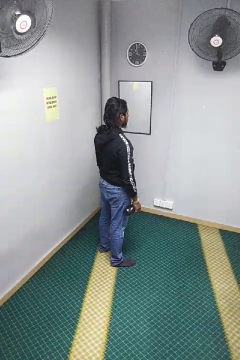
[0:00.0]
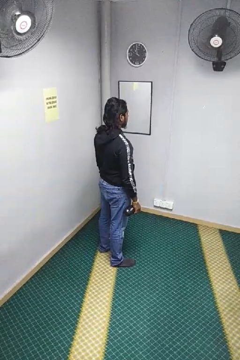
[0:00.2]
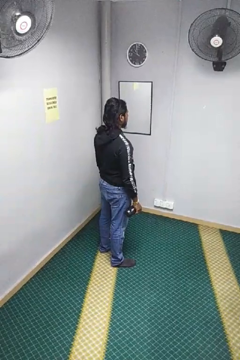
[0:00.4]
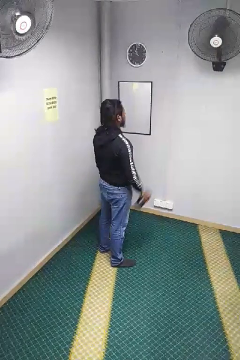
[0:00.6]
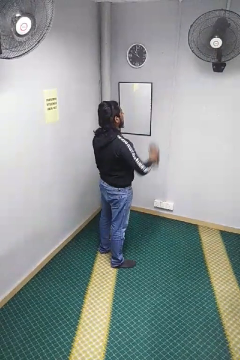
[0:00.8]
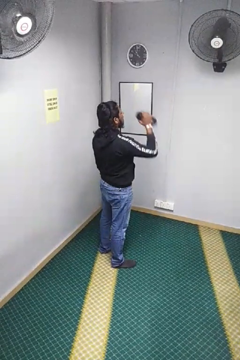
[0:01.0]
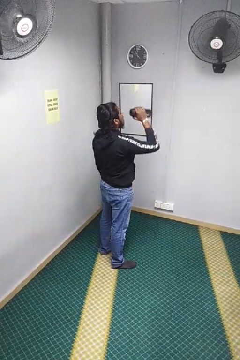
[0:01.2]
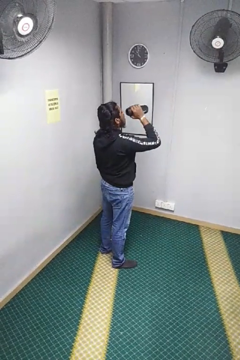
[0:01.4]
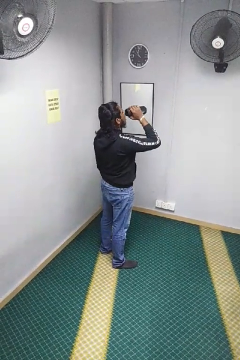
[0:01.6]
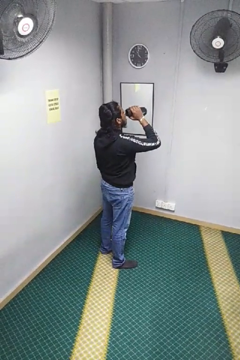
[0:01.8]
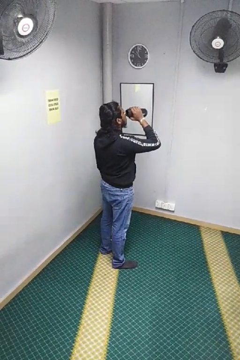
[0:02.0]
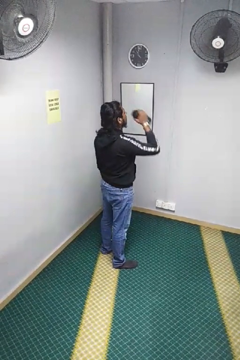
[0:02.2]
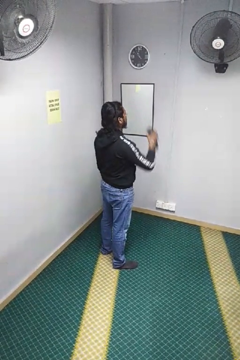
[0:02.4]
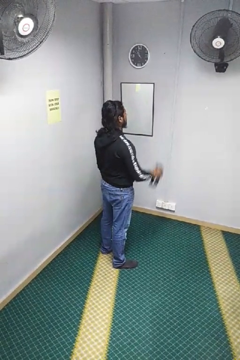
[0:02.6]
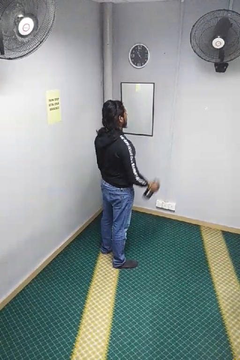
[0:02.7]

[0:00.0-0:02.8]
person drinks from bottle

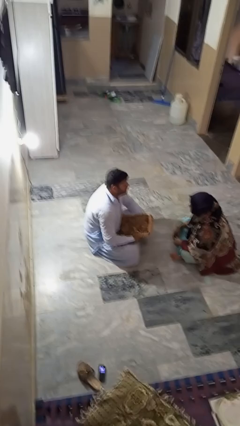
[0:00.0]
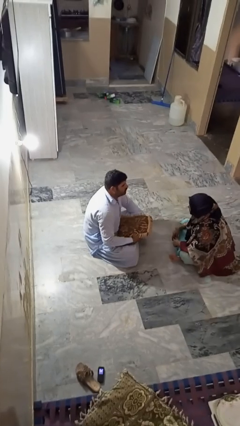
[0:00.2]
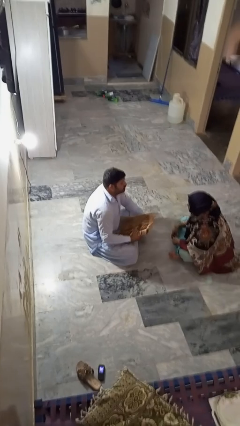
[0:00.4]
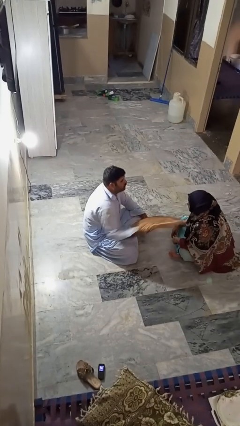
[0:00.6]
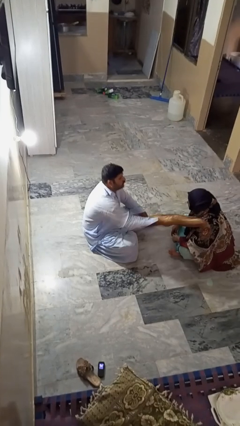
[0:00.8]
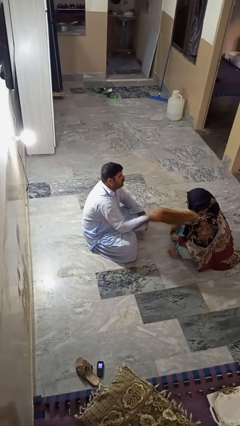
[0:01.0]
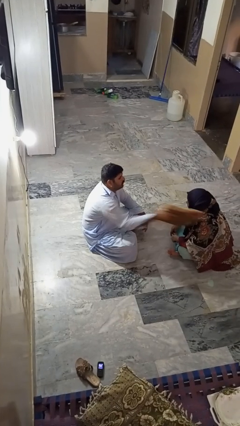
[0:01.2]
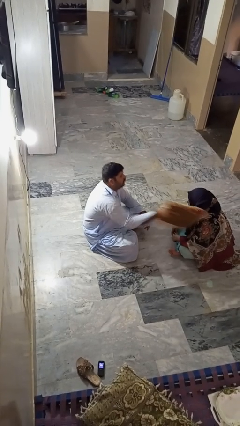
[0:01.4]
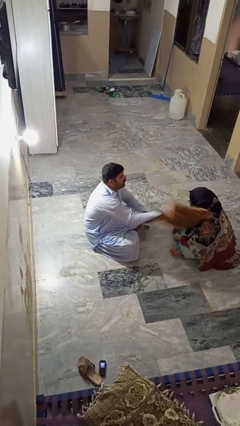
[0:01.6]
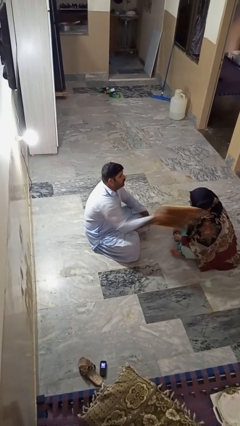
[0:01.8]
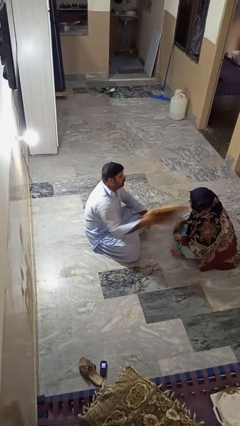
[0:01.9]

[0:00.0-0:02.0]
person hits person with pillow

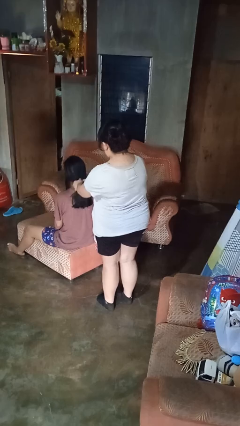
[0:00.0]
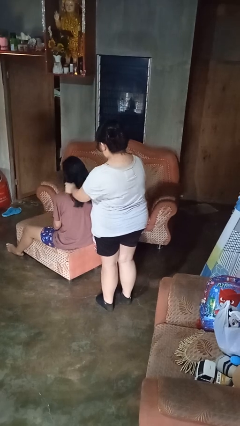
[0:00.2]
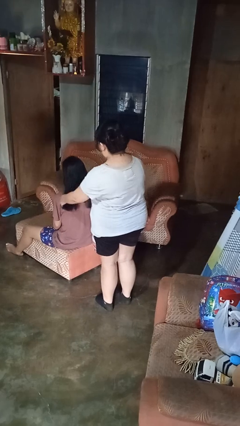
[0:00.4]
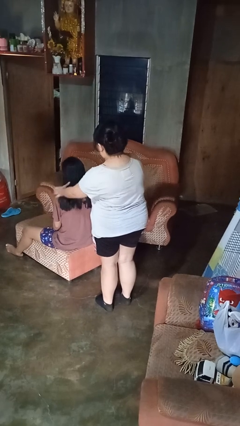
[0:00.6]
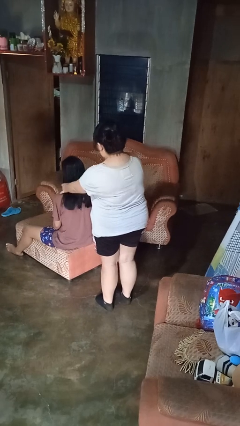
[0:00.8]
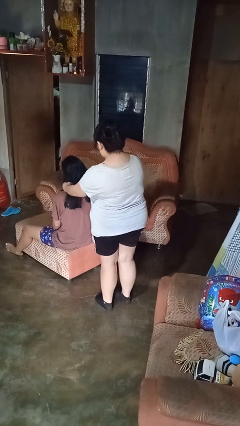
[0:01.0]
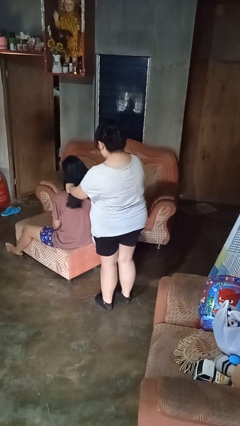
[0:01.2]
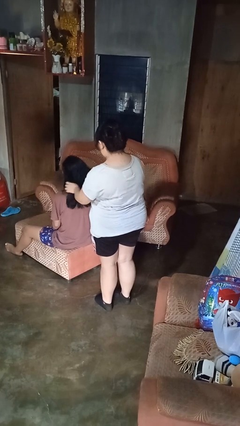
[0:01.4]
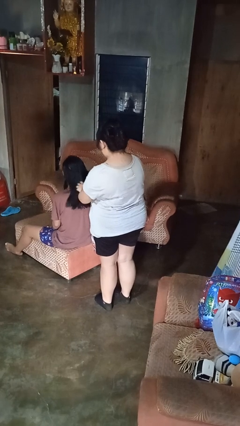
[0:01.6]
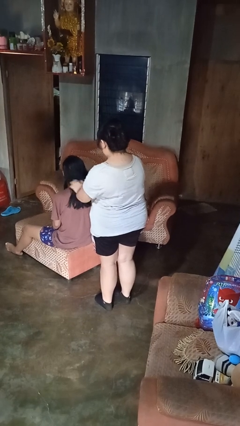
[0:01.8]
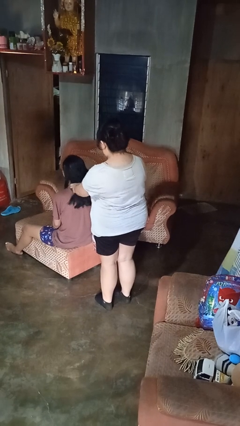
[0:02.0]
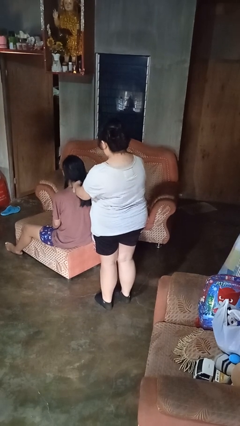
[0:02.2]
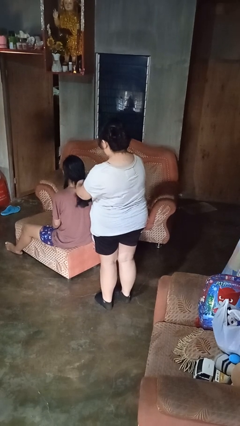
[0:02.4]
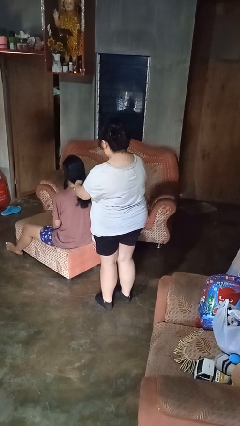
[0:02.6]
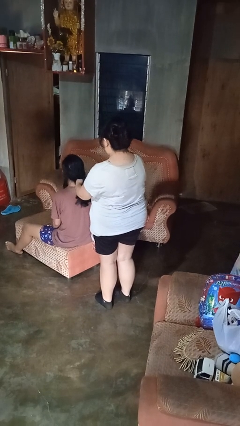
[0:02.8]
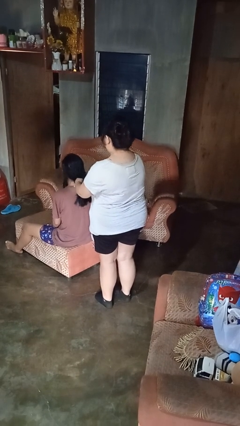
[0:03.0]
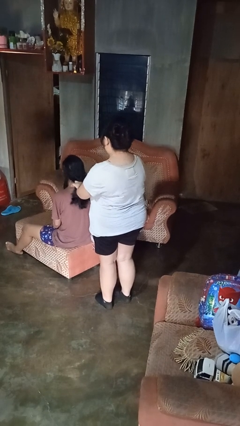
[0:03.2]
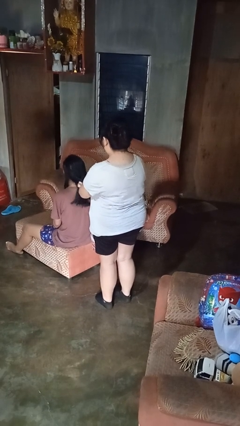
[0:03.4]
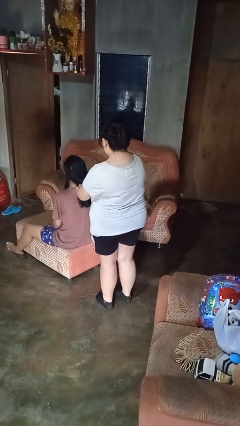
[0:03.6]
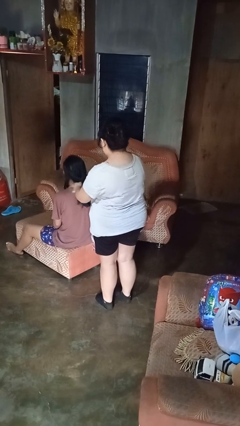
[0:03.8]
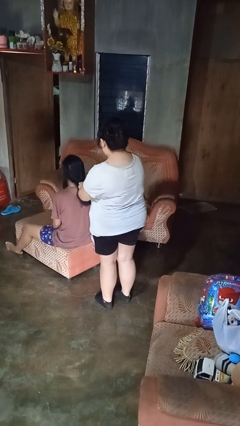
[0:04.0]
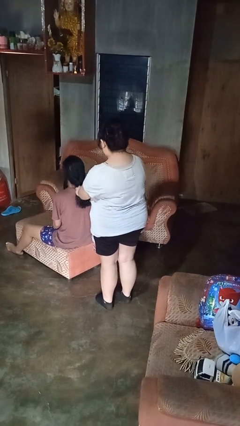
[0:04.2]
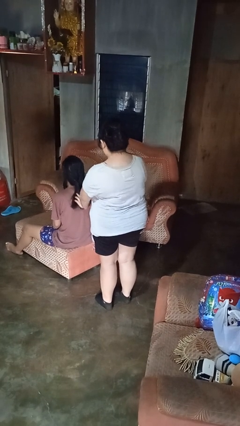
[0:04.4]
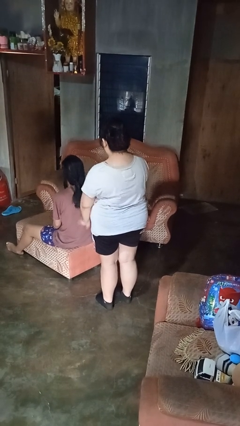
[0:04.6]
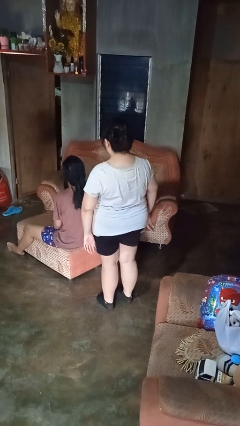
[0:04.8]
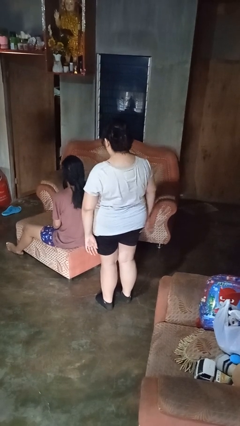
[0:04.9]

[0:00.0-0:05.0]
person braids hair of person

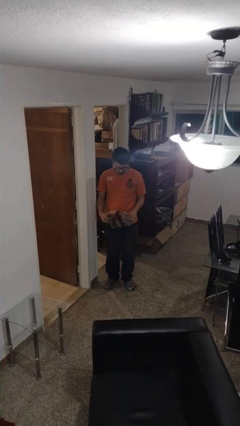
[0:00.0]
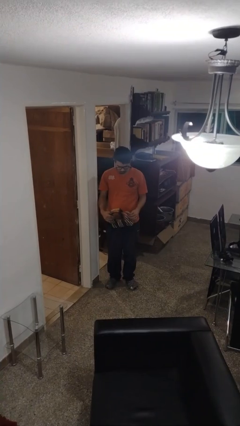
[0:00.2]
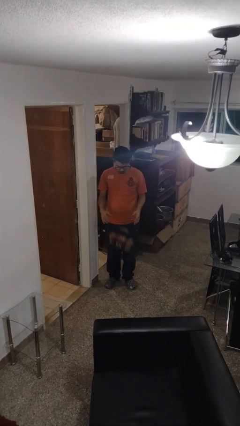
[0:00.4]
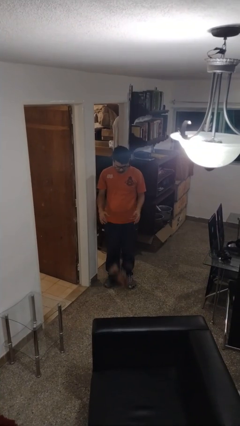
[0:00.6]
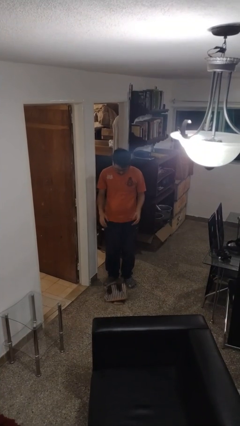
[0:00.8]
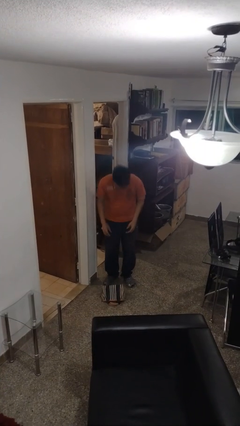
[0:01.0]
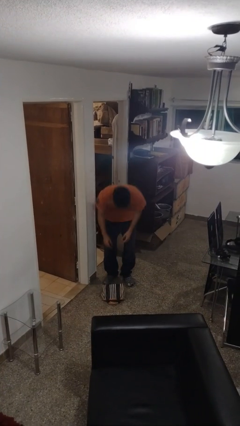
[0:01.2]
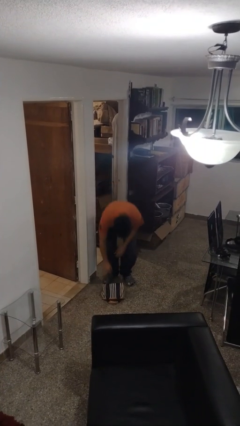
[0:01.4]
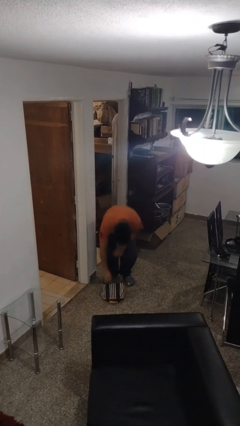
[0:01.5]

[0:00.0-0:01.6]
person drops object

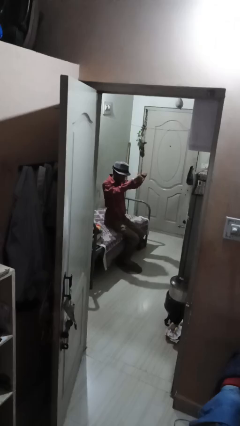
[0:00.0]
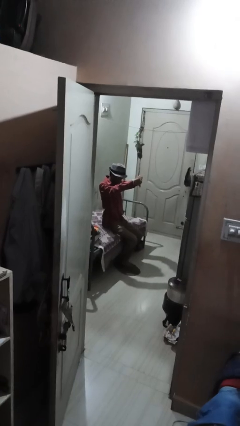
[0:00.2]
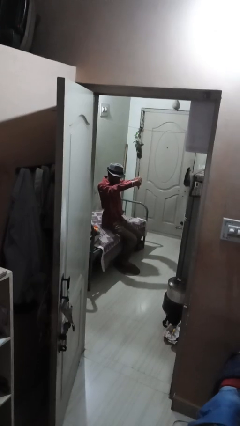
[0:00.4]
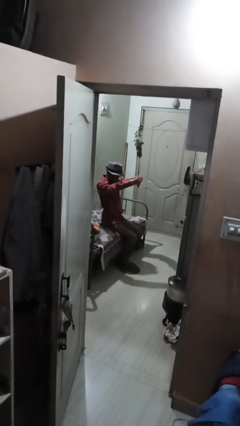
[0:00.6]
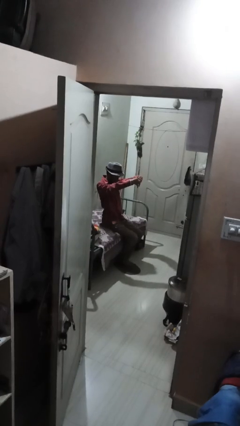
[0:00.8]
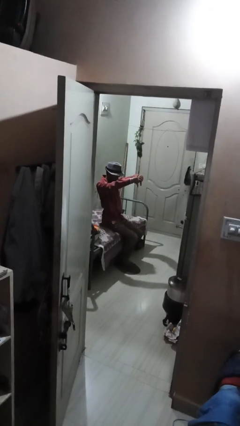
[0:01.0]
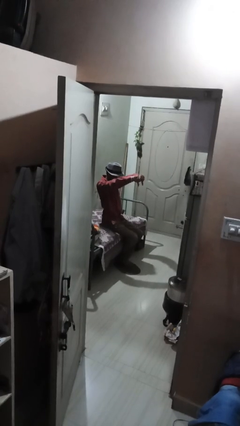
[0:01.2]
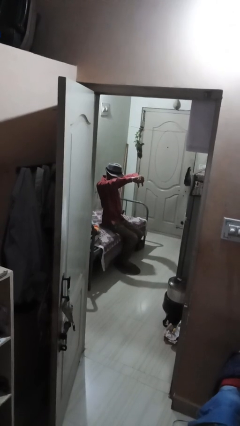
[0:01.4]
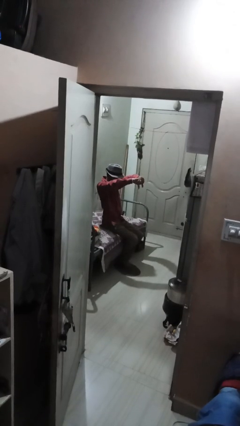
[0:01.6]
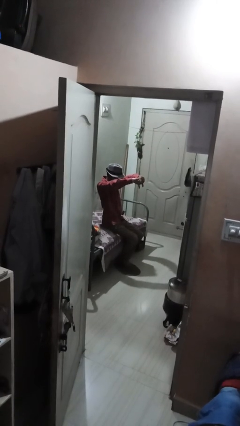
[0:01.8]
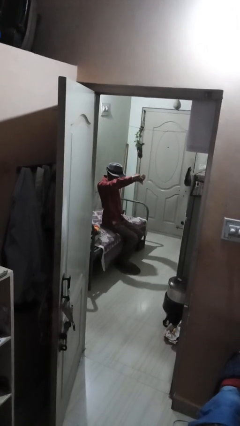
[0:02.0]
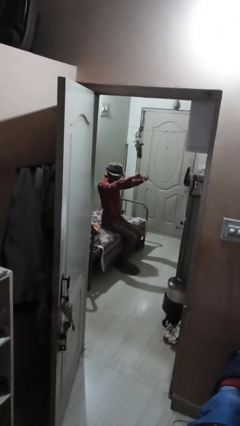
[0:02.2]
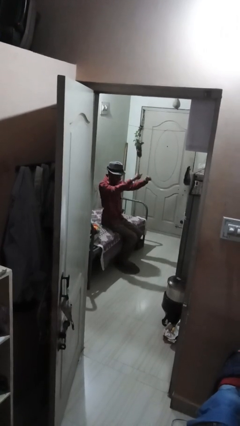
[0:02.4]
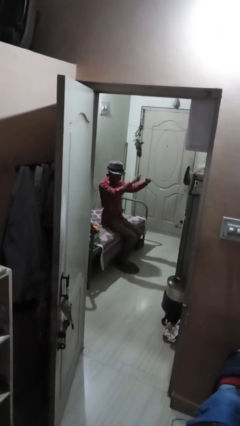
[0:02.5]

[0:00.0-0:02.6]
person gestures thumbs down

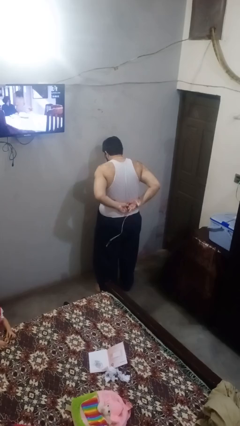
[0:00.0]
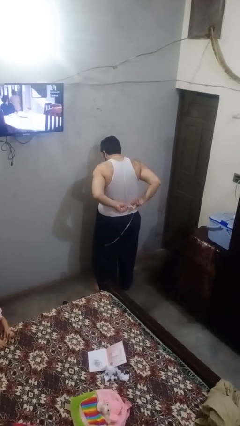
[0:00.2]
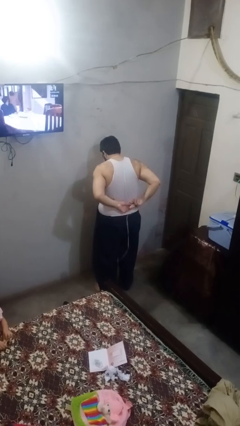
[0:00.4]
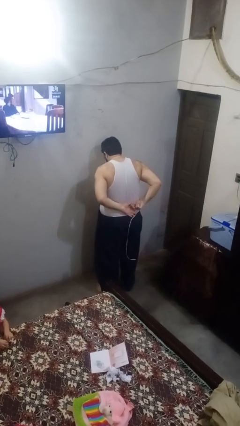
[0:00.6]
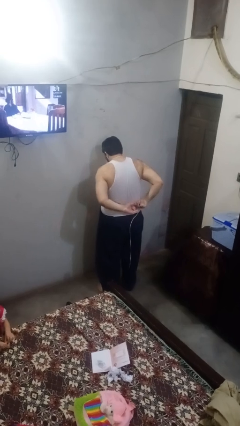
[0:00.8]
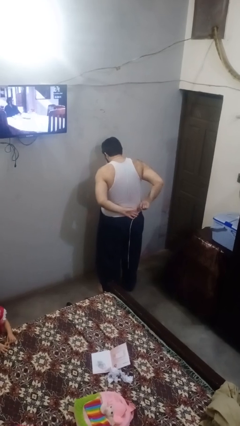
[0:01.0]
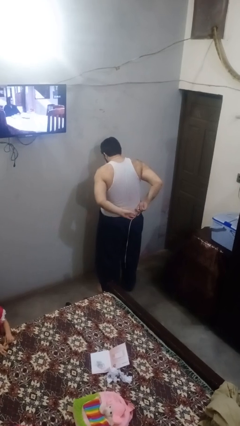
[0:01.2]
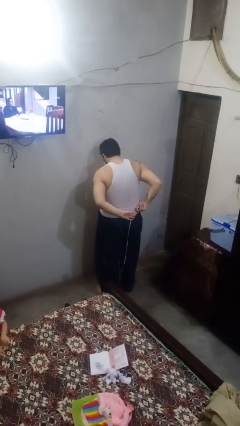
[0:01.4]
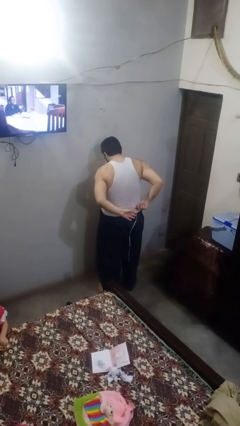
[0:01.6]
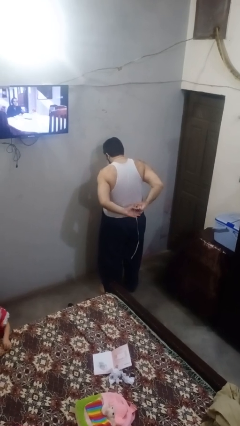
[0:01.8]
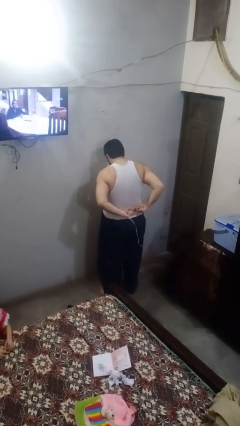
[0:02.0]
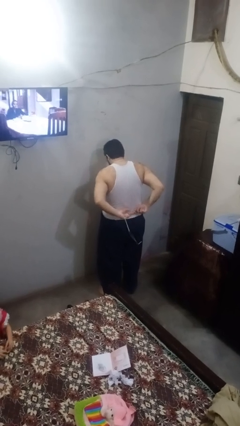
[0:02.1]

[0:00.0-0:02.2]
person puts on apron

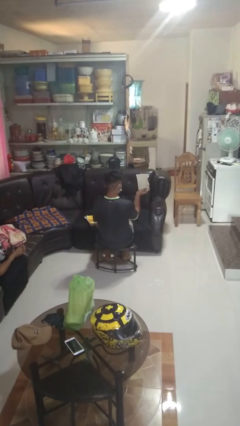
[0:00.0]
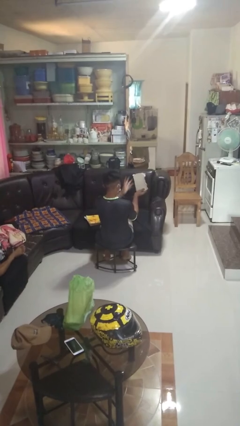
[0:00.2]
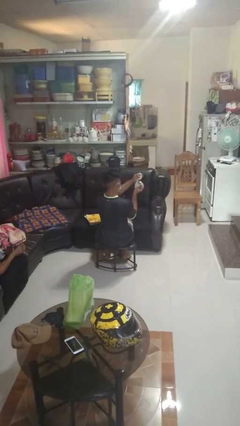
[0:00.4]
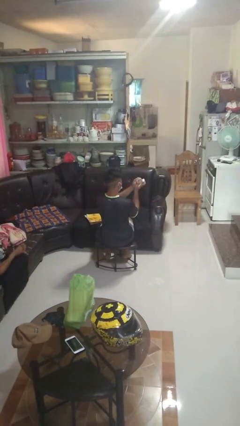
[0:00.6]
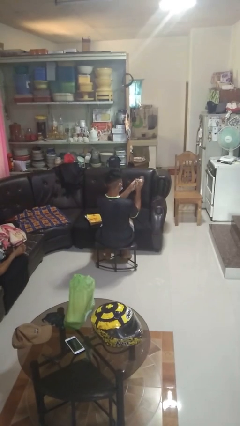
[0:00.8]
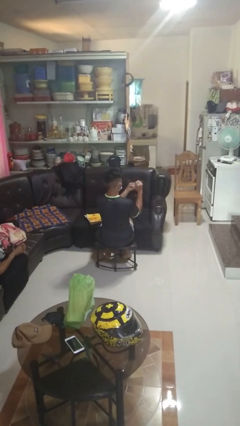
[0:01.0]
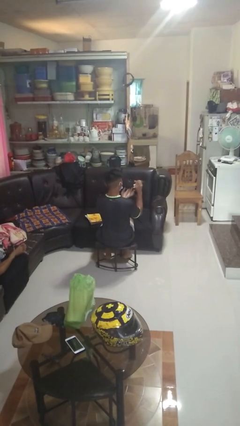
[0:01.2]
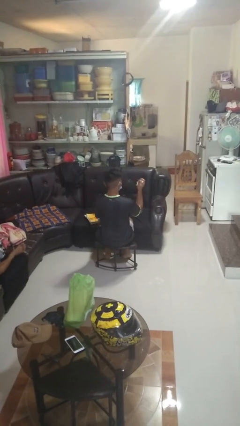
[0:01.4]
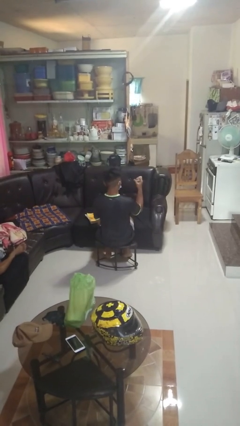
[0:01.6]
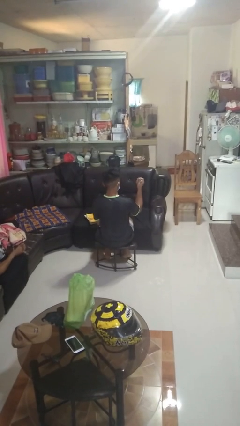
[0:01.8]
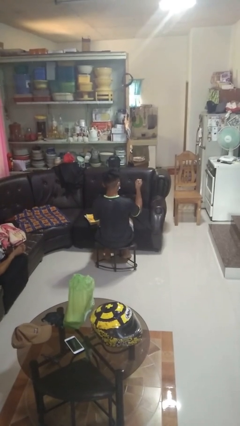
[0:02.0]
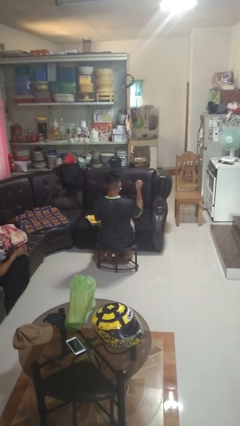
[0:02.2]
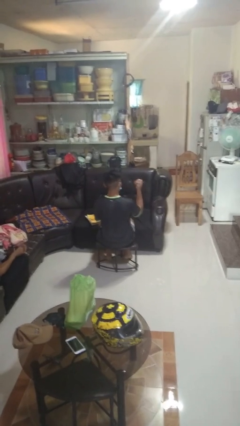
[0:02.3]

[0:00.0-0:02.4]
person crumples paper
